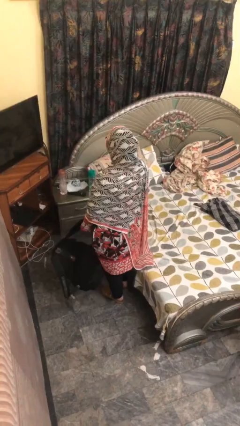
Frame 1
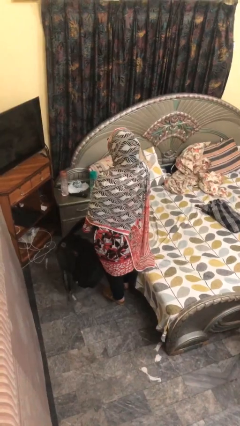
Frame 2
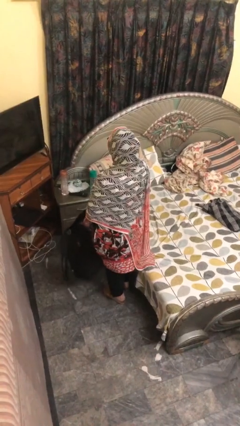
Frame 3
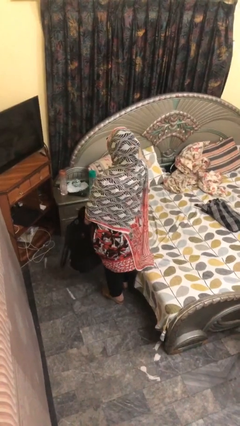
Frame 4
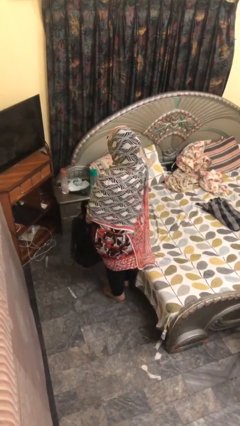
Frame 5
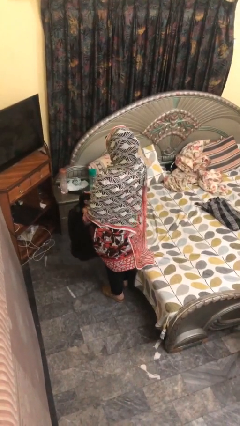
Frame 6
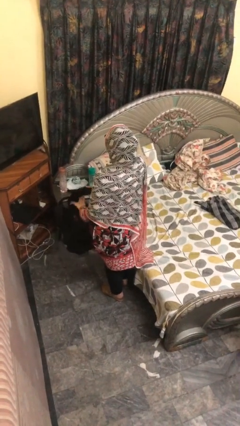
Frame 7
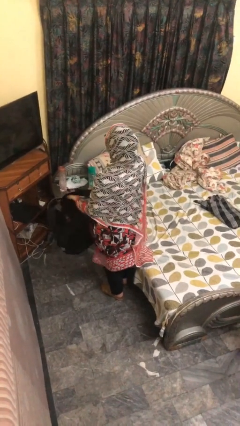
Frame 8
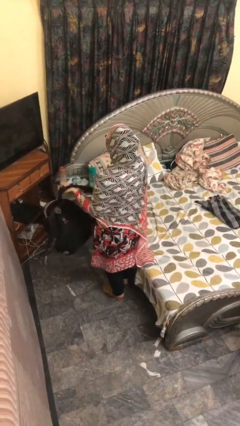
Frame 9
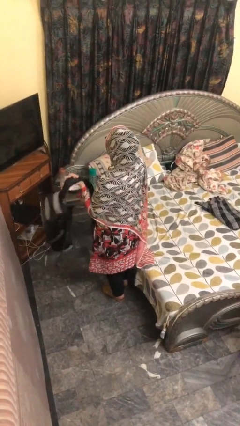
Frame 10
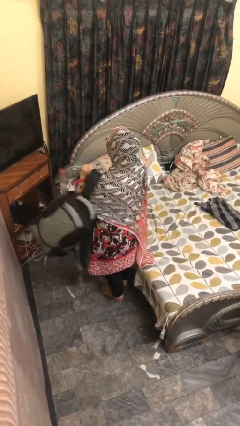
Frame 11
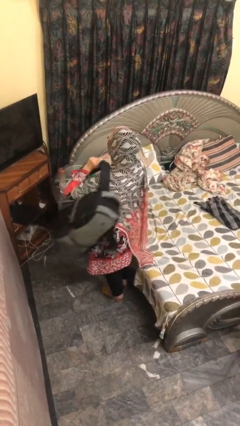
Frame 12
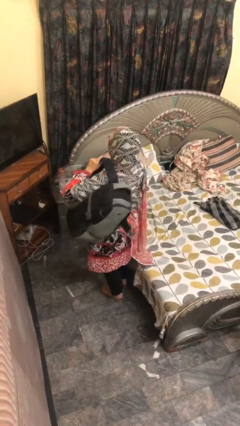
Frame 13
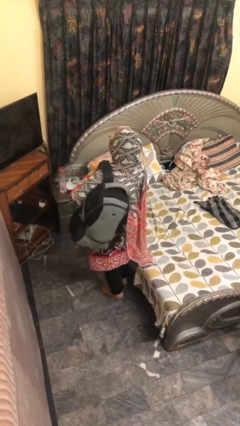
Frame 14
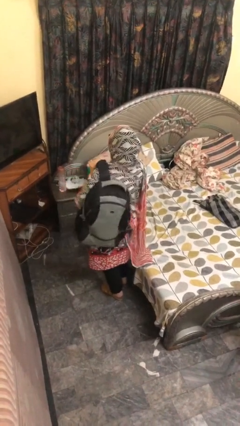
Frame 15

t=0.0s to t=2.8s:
person puts on backpack

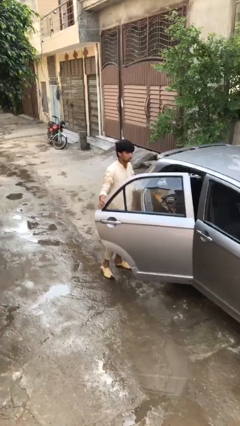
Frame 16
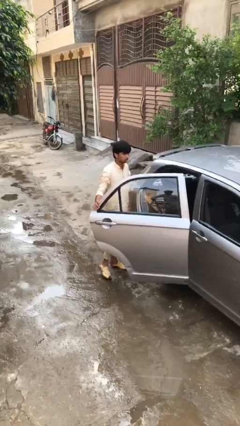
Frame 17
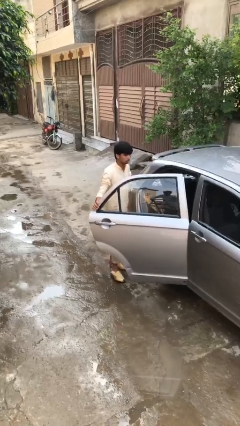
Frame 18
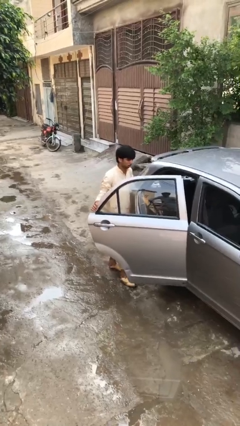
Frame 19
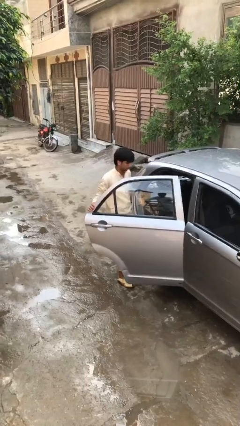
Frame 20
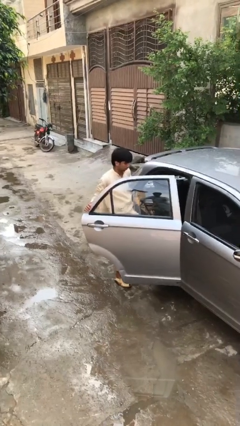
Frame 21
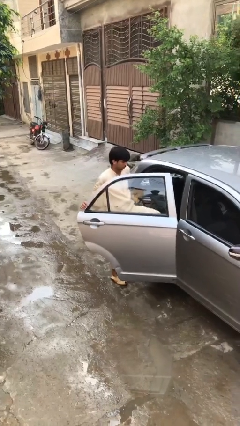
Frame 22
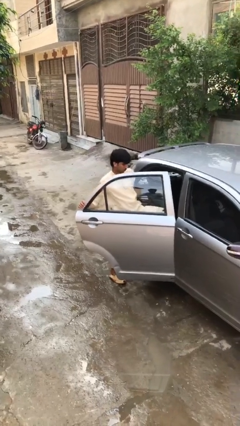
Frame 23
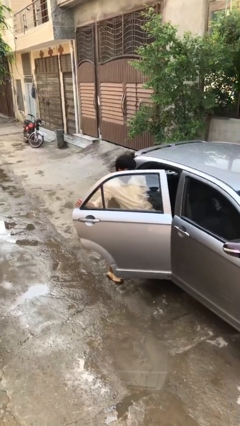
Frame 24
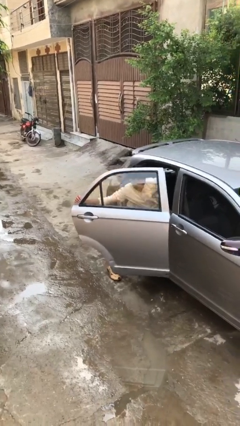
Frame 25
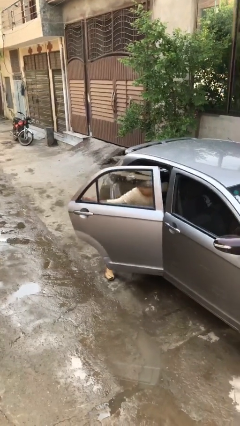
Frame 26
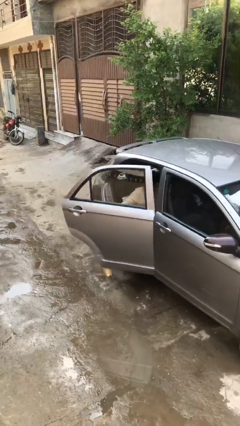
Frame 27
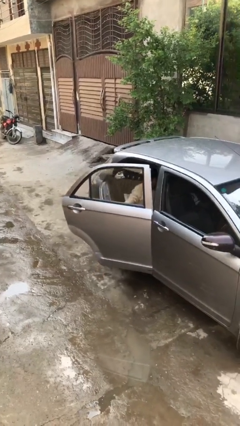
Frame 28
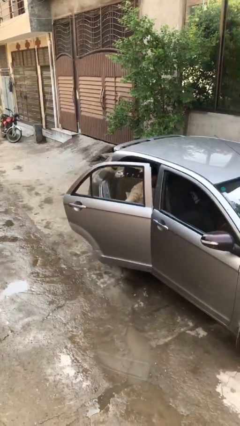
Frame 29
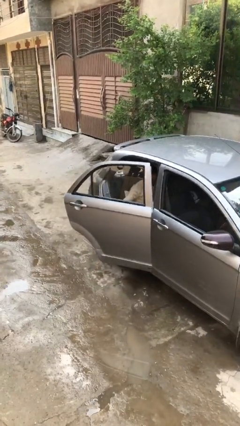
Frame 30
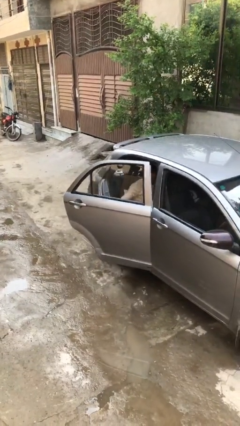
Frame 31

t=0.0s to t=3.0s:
person enters car

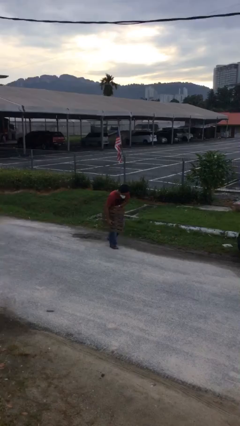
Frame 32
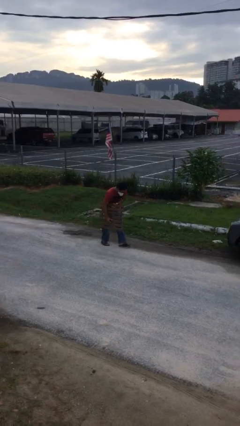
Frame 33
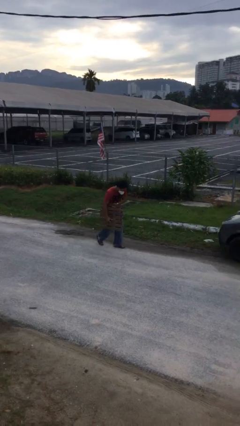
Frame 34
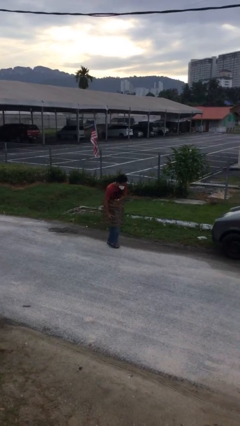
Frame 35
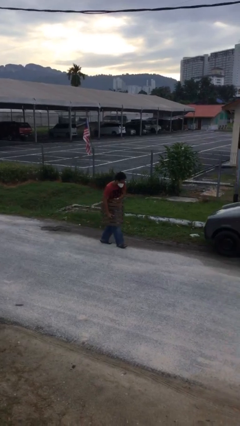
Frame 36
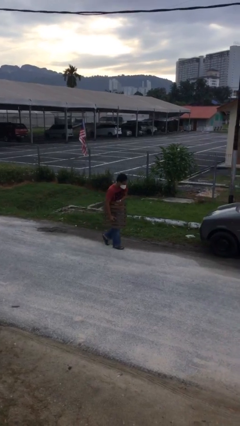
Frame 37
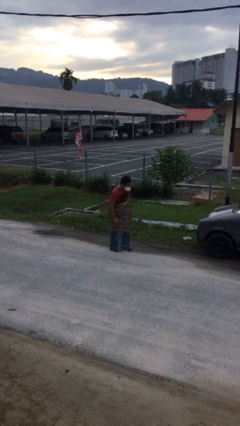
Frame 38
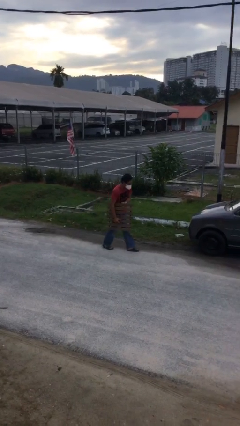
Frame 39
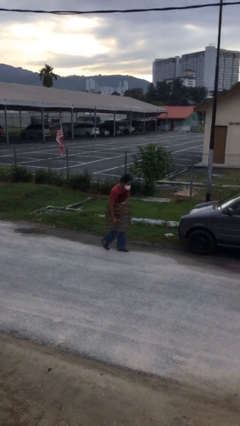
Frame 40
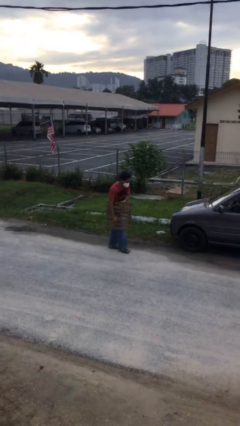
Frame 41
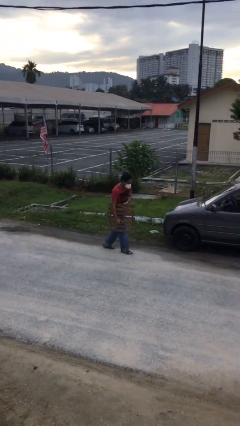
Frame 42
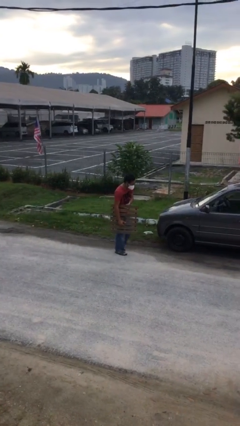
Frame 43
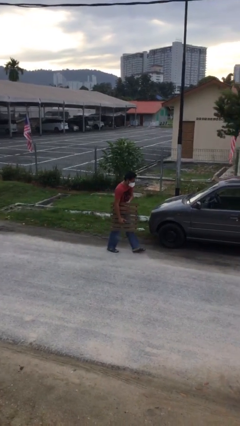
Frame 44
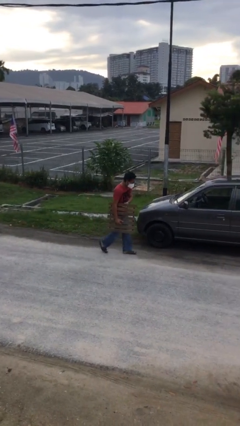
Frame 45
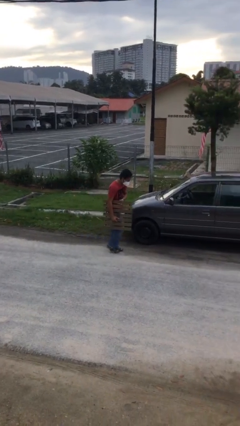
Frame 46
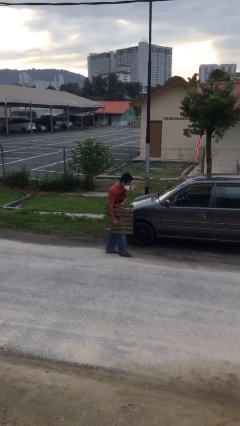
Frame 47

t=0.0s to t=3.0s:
person carries heavy object

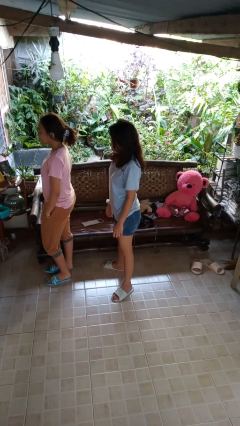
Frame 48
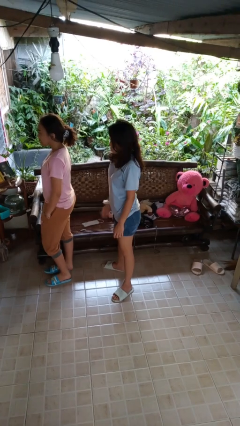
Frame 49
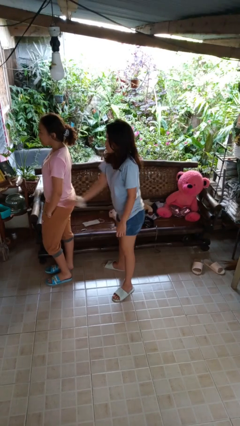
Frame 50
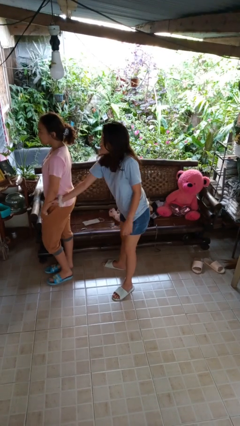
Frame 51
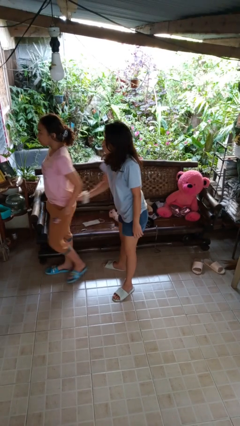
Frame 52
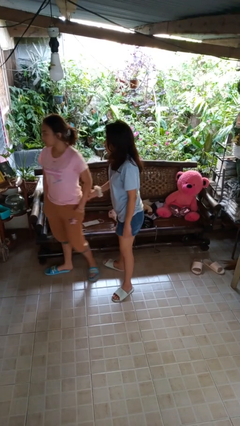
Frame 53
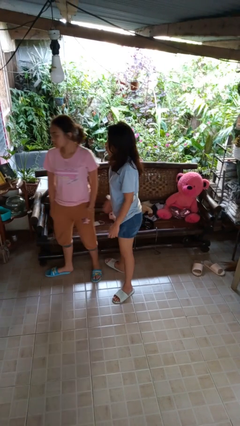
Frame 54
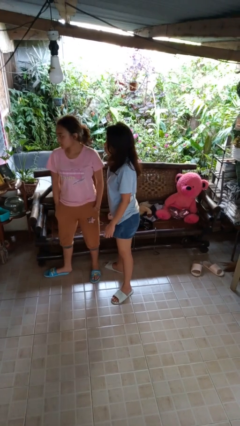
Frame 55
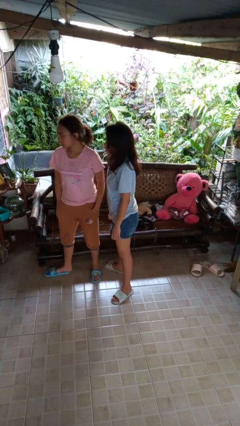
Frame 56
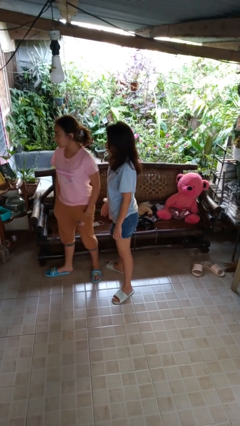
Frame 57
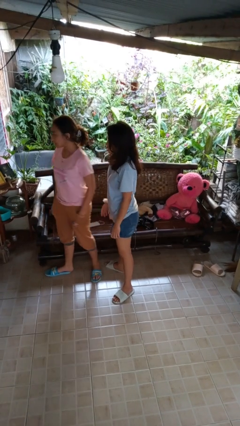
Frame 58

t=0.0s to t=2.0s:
person grabs person by forearm

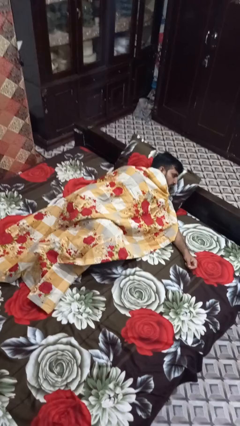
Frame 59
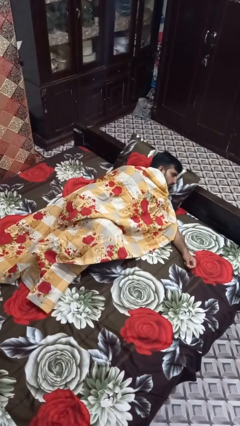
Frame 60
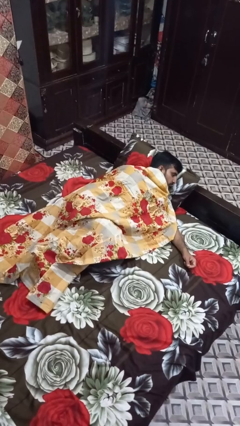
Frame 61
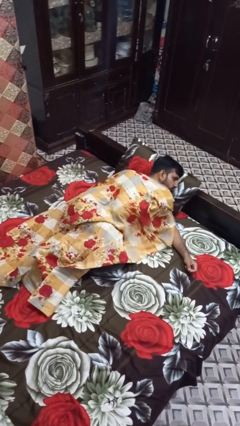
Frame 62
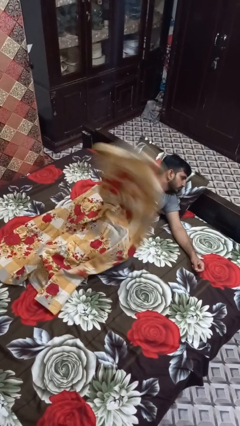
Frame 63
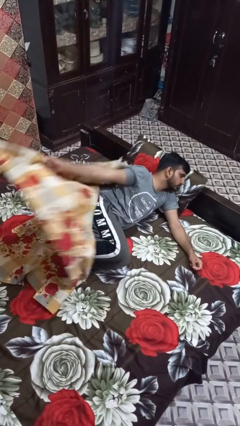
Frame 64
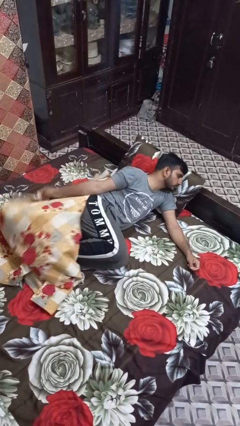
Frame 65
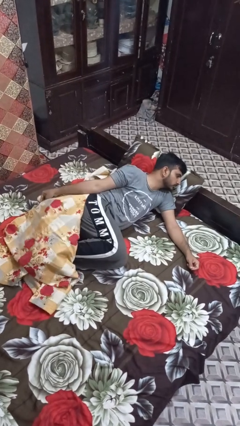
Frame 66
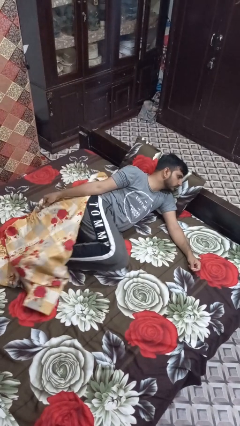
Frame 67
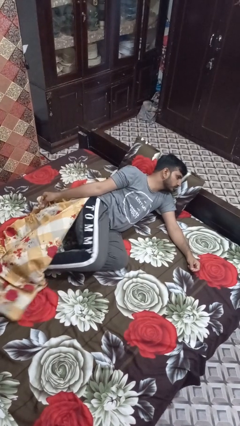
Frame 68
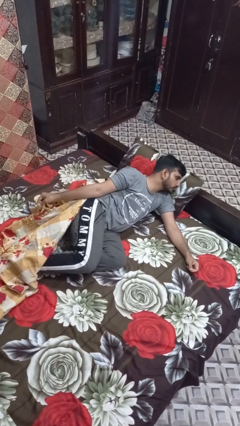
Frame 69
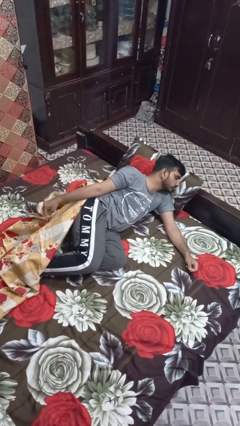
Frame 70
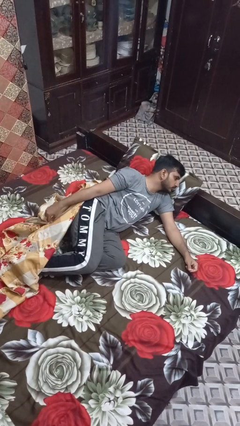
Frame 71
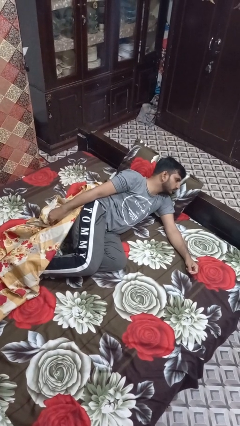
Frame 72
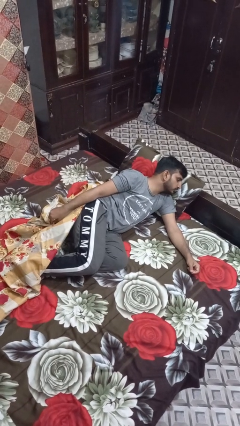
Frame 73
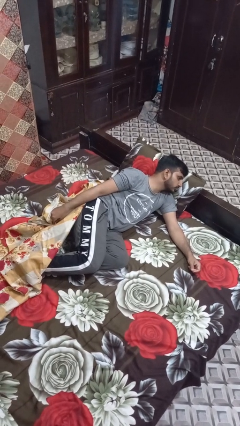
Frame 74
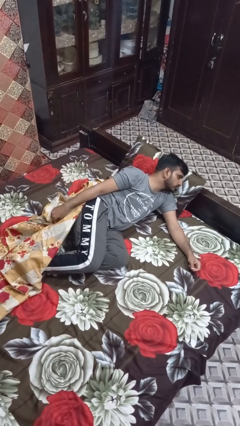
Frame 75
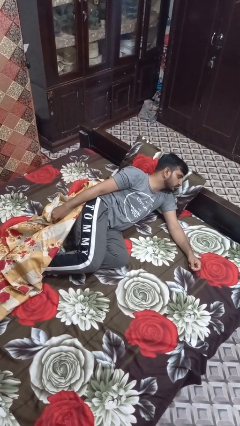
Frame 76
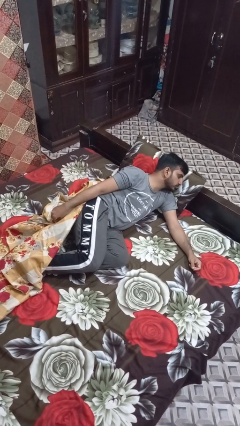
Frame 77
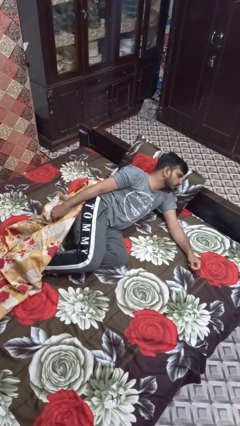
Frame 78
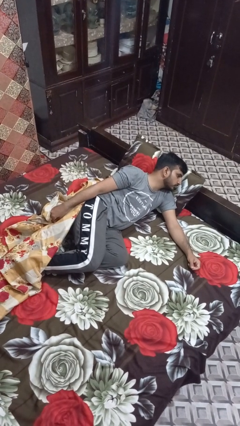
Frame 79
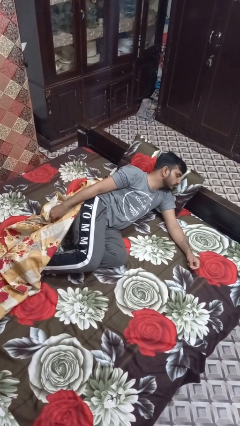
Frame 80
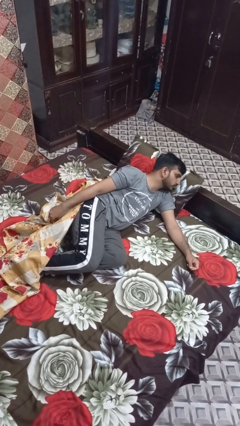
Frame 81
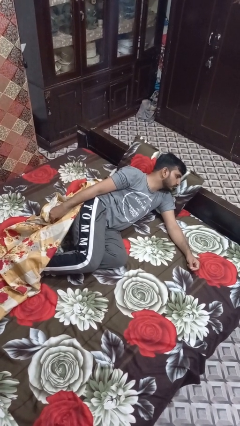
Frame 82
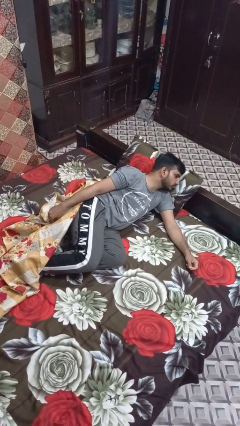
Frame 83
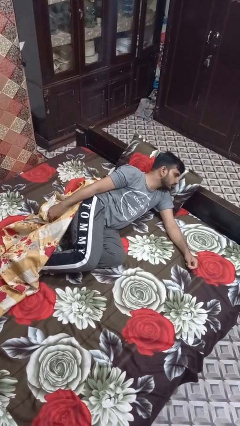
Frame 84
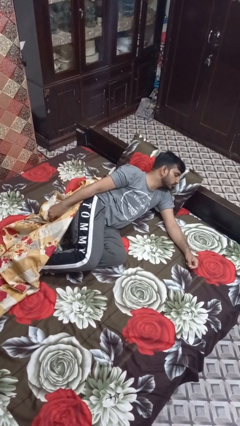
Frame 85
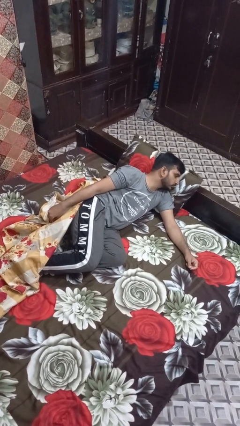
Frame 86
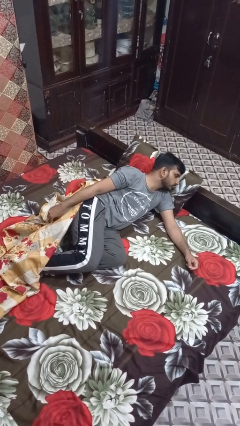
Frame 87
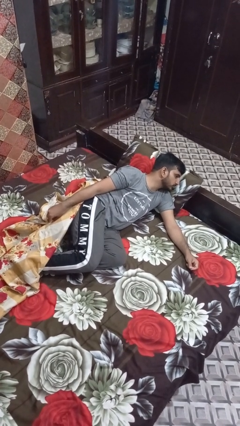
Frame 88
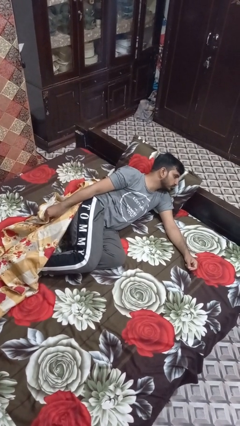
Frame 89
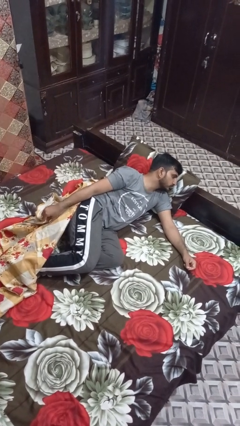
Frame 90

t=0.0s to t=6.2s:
person uncovers with bedsheets

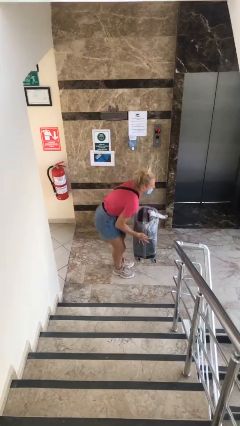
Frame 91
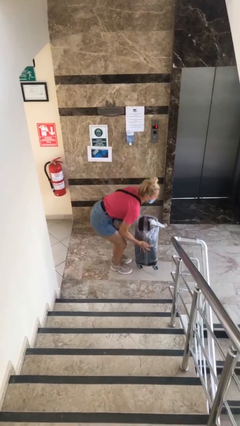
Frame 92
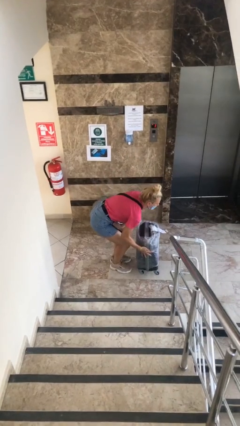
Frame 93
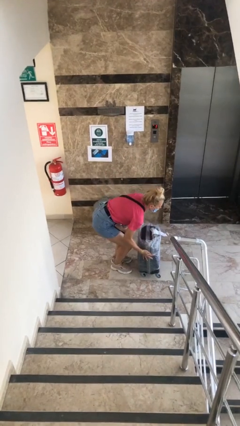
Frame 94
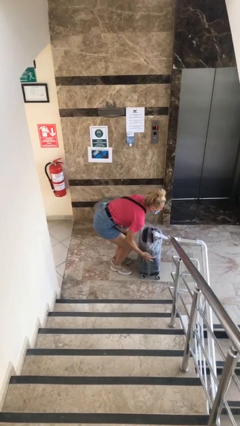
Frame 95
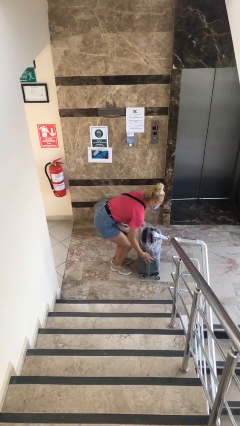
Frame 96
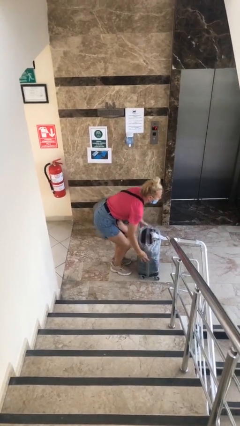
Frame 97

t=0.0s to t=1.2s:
person puts down object on floor
